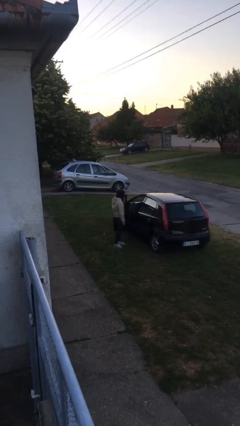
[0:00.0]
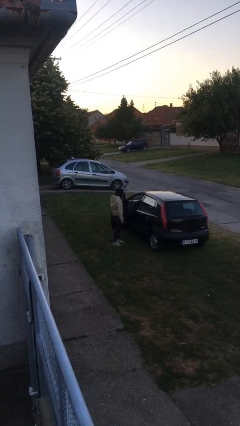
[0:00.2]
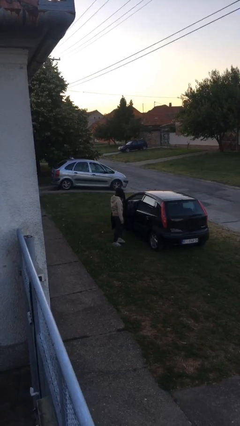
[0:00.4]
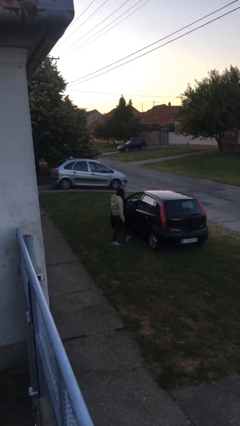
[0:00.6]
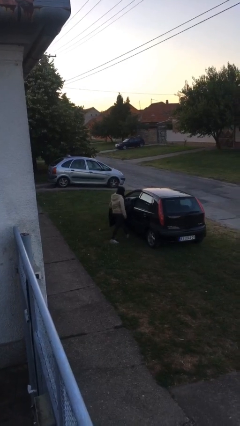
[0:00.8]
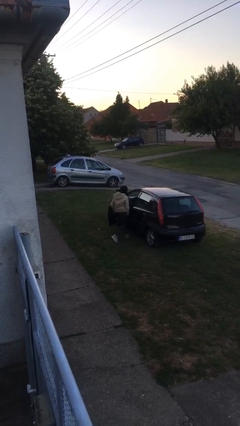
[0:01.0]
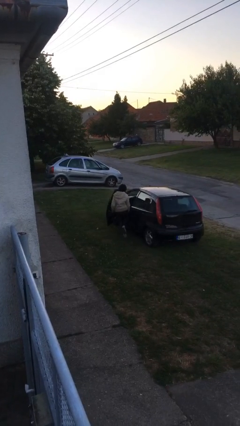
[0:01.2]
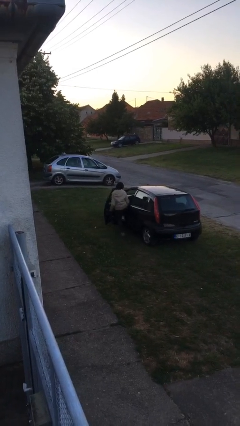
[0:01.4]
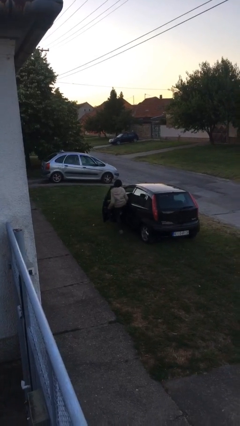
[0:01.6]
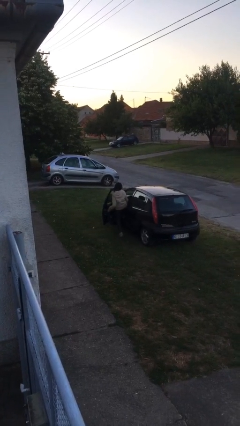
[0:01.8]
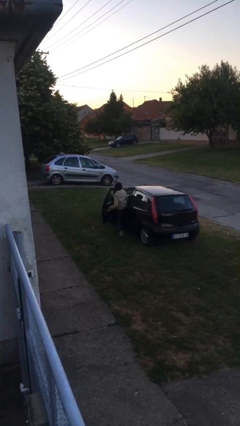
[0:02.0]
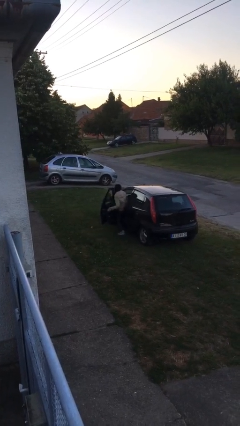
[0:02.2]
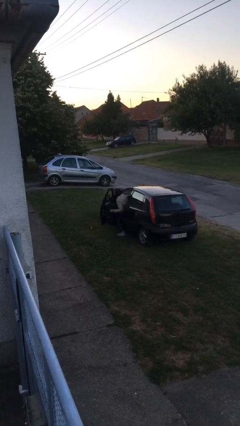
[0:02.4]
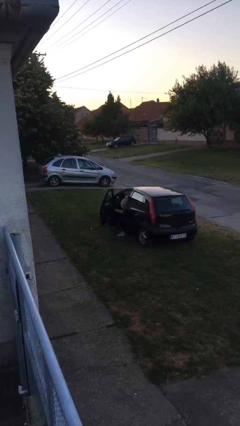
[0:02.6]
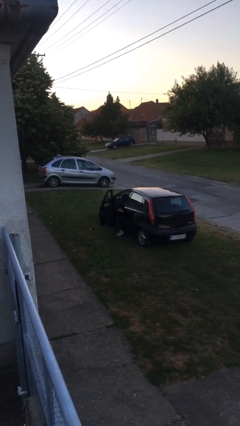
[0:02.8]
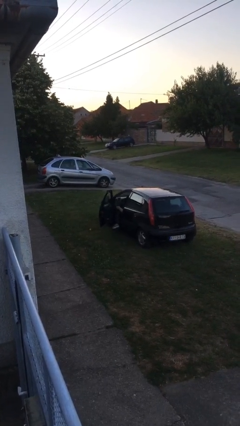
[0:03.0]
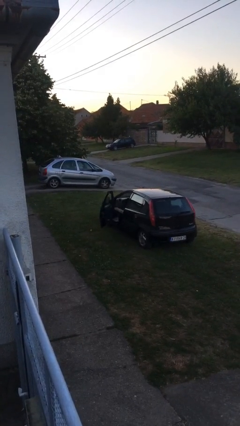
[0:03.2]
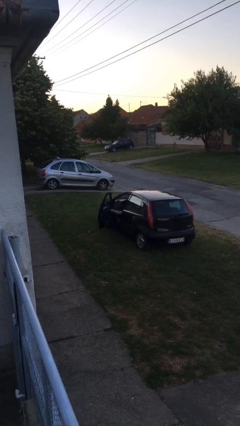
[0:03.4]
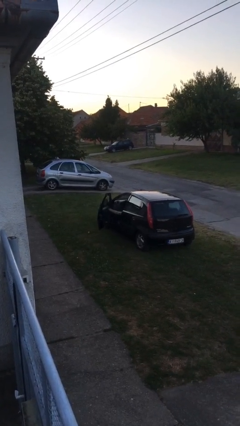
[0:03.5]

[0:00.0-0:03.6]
person enters car

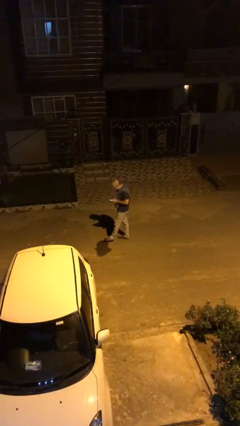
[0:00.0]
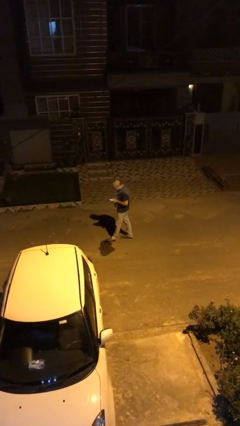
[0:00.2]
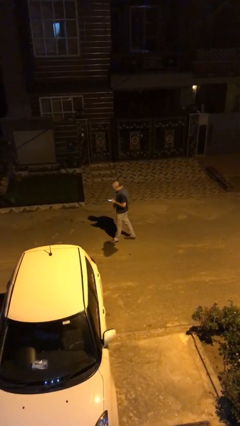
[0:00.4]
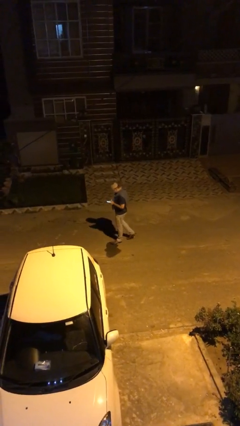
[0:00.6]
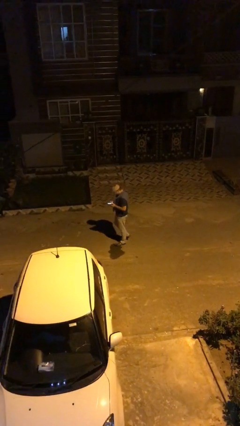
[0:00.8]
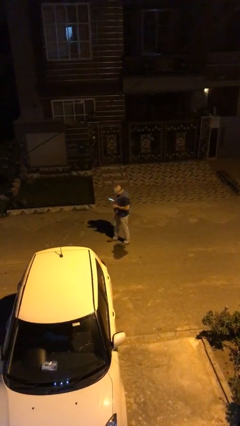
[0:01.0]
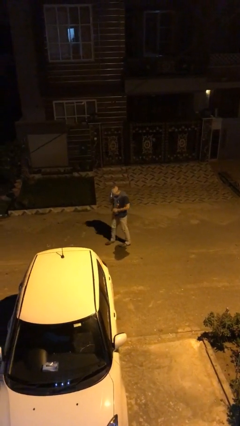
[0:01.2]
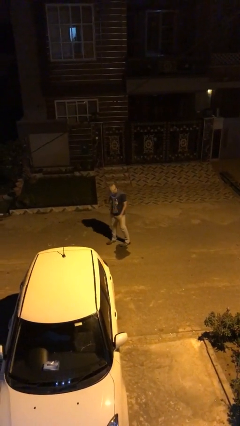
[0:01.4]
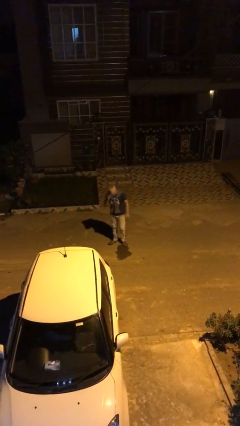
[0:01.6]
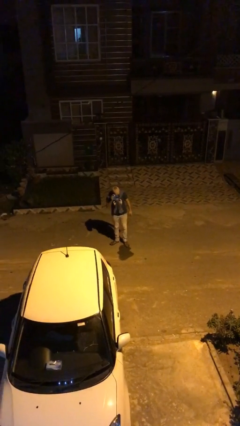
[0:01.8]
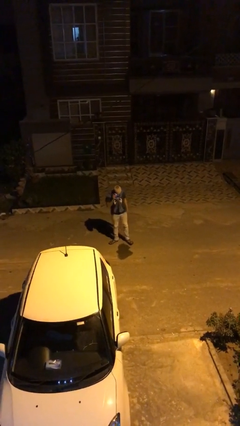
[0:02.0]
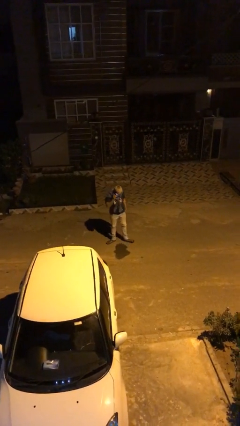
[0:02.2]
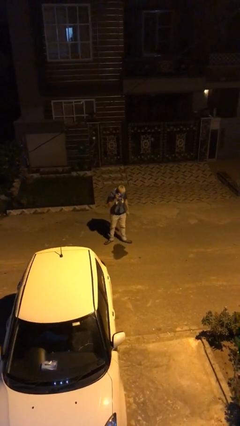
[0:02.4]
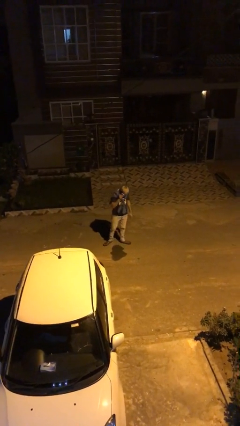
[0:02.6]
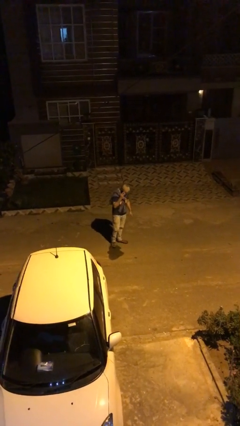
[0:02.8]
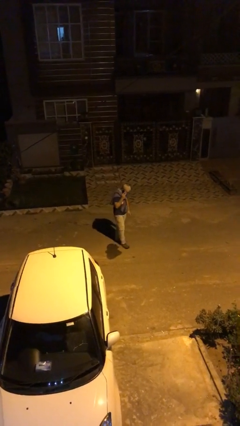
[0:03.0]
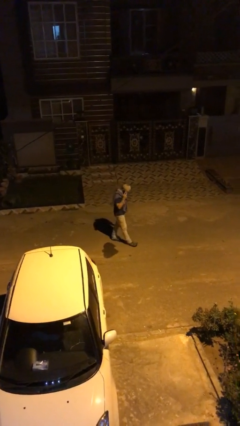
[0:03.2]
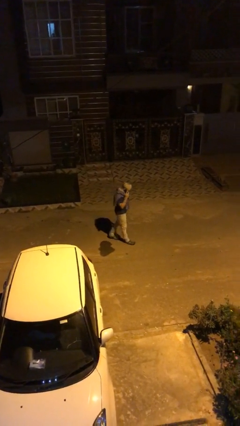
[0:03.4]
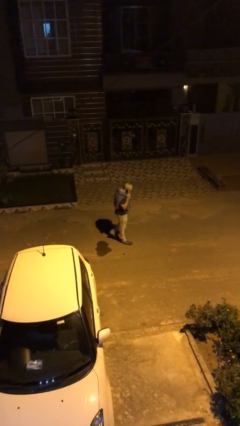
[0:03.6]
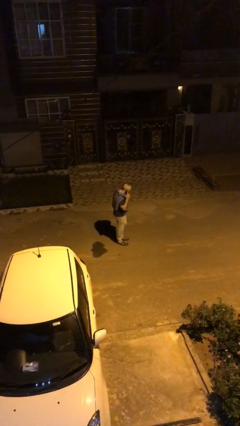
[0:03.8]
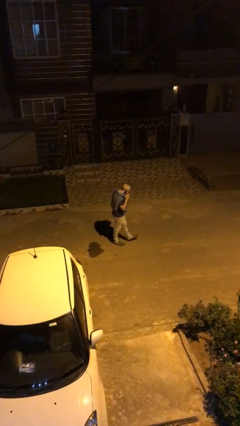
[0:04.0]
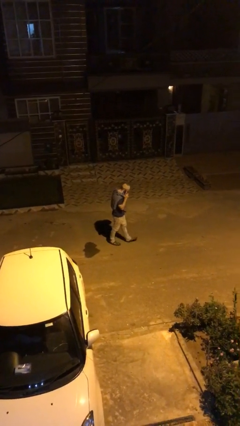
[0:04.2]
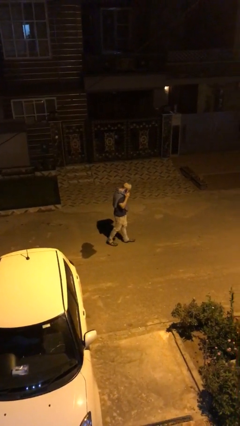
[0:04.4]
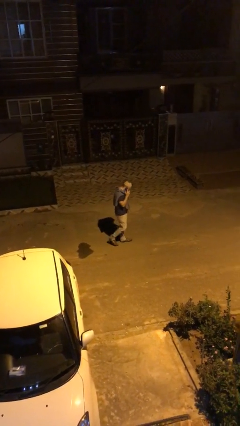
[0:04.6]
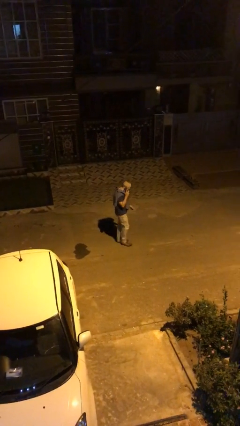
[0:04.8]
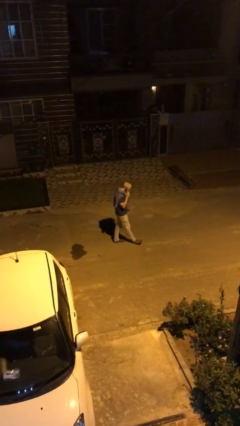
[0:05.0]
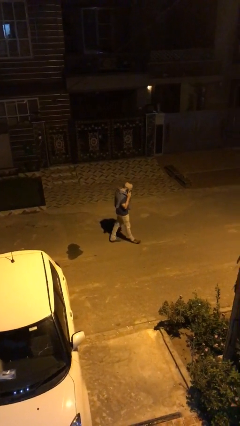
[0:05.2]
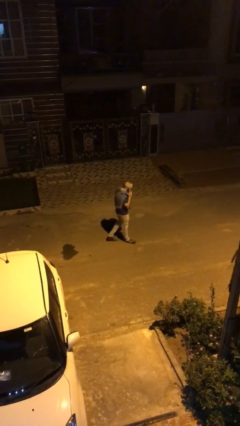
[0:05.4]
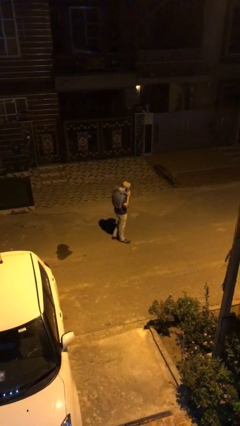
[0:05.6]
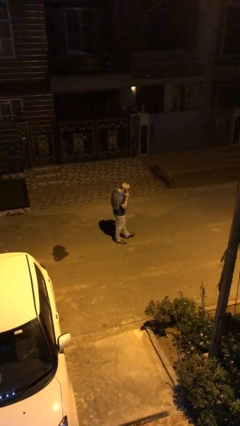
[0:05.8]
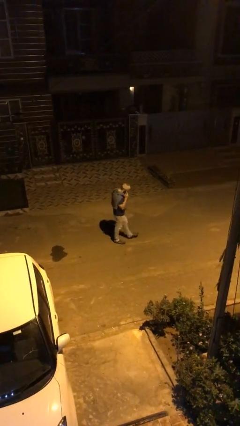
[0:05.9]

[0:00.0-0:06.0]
person talks on phone

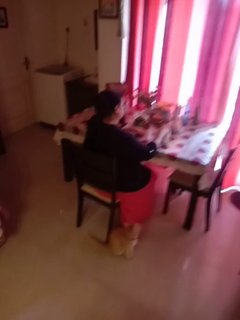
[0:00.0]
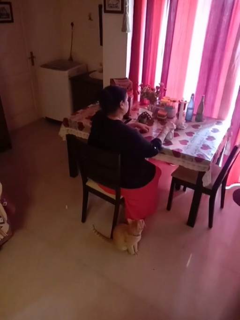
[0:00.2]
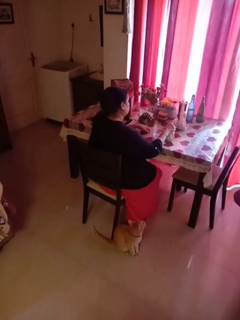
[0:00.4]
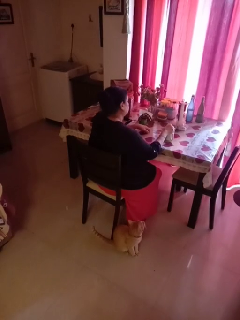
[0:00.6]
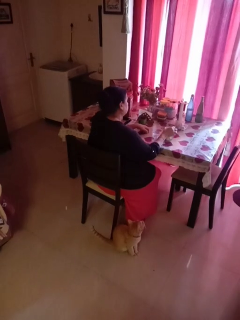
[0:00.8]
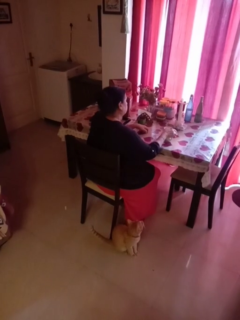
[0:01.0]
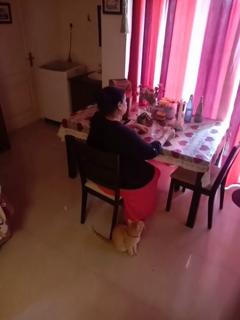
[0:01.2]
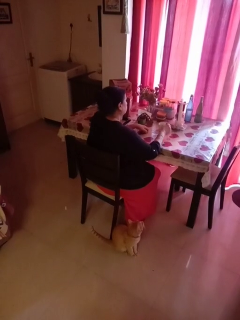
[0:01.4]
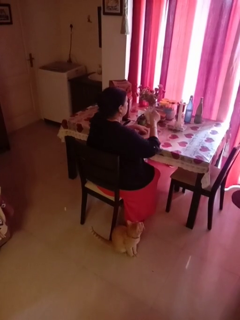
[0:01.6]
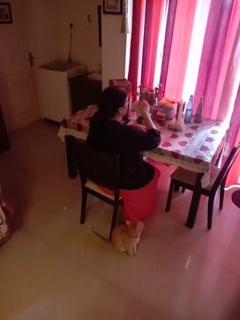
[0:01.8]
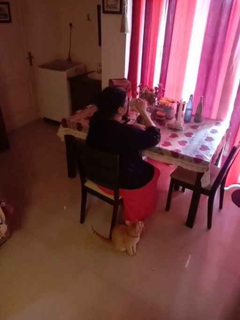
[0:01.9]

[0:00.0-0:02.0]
person stirs mug

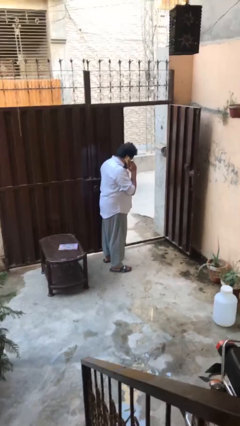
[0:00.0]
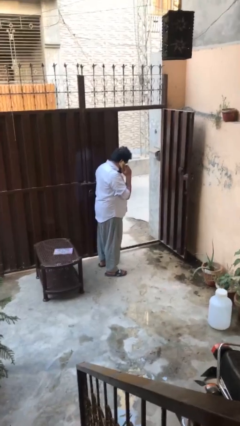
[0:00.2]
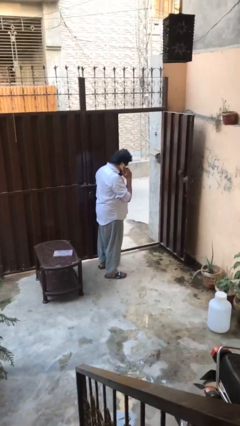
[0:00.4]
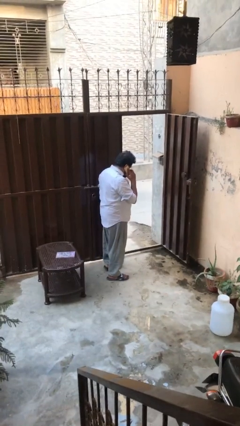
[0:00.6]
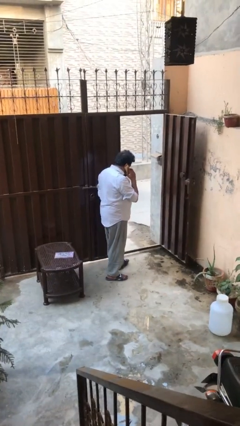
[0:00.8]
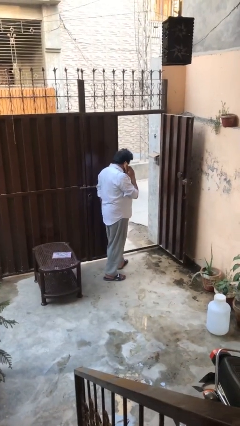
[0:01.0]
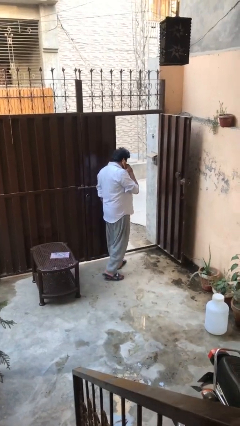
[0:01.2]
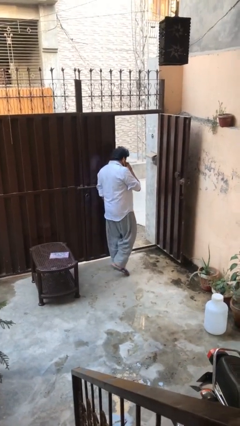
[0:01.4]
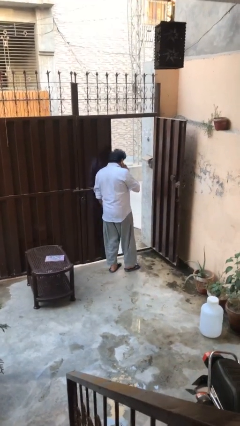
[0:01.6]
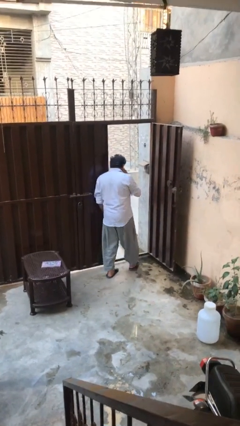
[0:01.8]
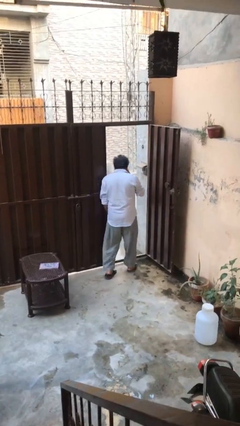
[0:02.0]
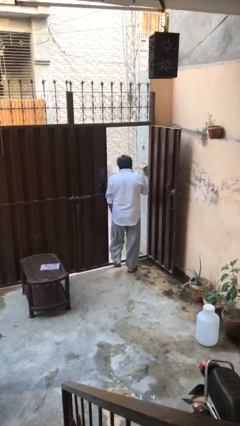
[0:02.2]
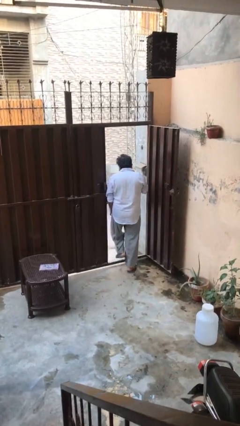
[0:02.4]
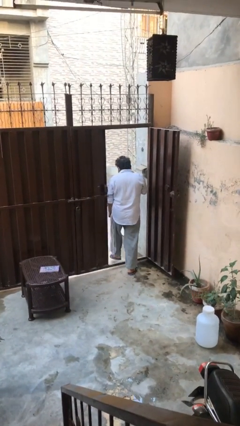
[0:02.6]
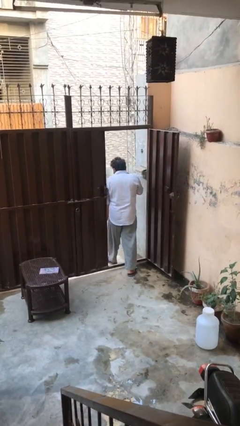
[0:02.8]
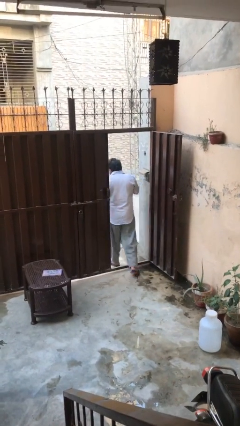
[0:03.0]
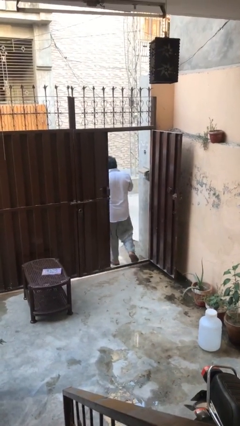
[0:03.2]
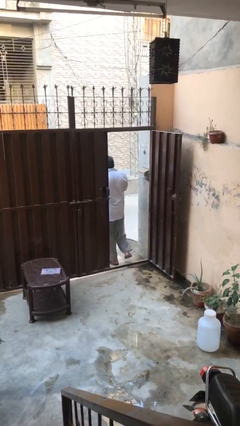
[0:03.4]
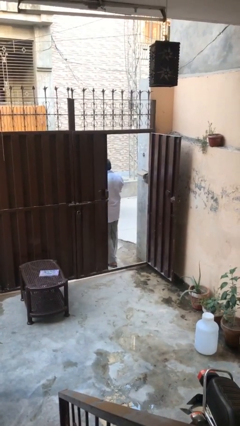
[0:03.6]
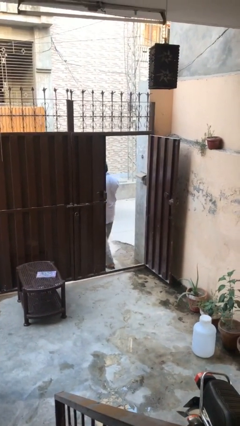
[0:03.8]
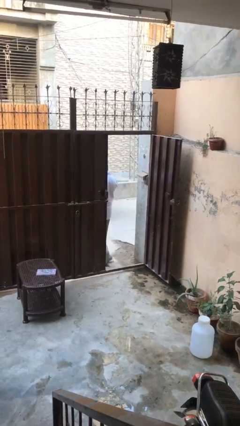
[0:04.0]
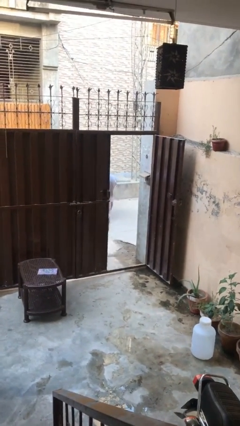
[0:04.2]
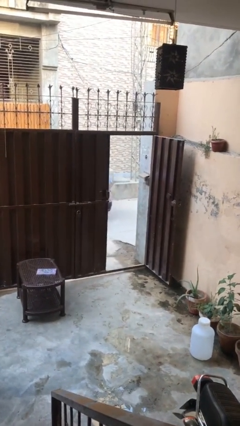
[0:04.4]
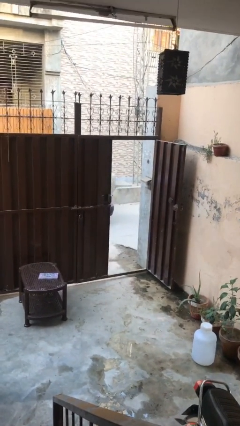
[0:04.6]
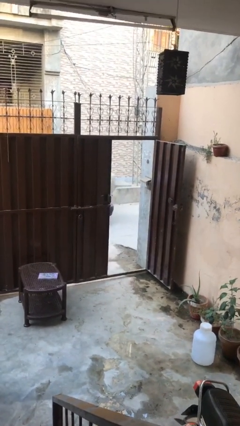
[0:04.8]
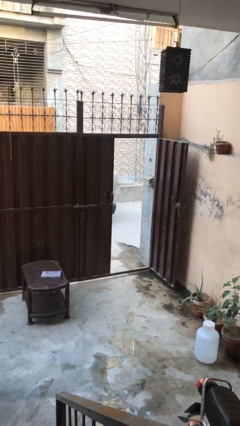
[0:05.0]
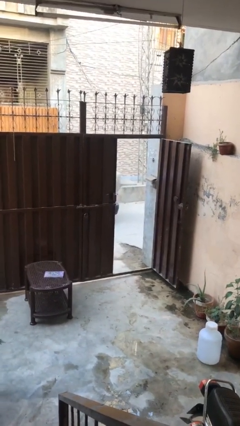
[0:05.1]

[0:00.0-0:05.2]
person exits scene through structure

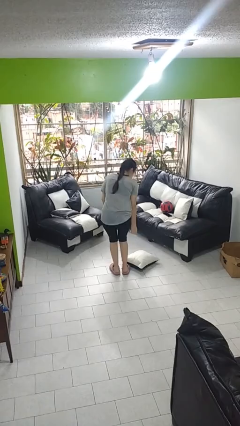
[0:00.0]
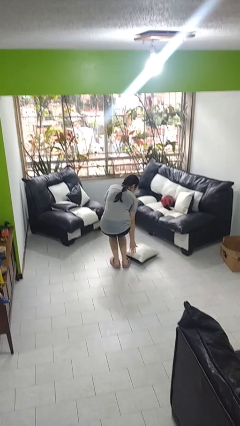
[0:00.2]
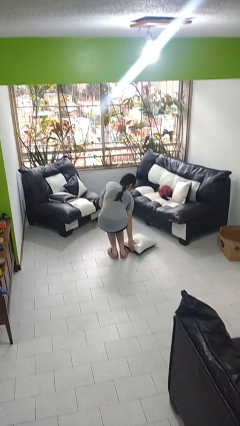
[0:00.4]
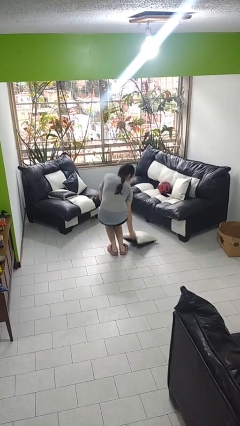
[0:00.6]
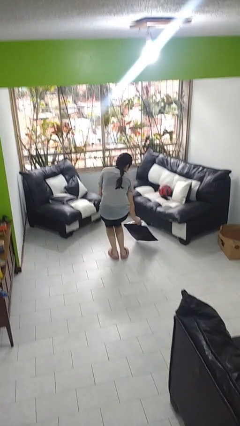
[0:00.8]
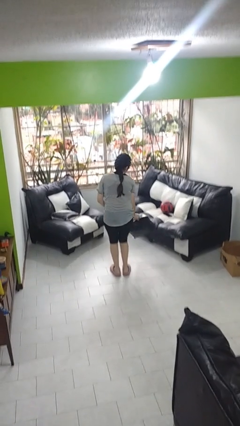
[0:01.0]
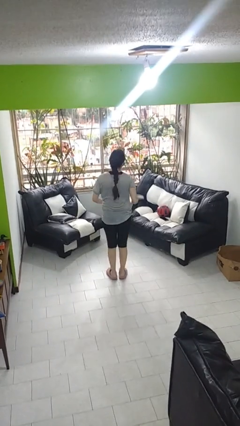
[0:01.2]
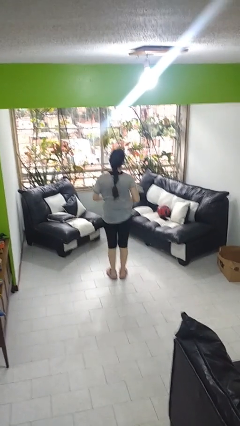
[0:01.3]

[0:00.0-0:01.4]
person picks up object from floor
